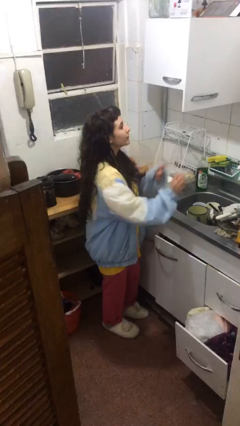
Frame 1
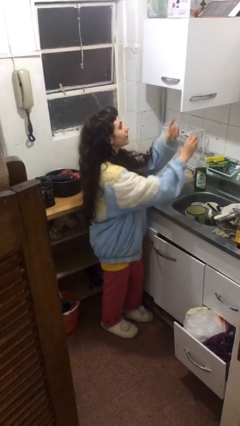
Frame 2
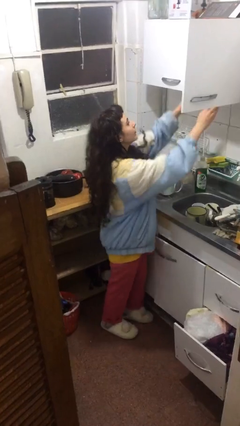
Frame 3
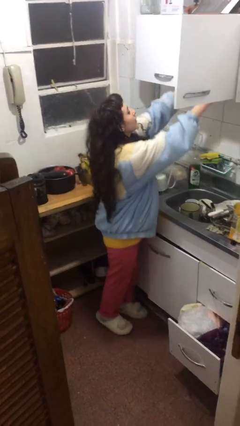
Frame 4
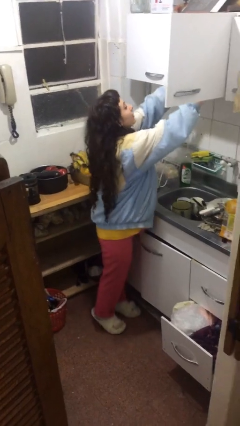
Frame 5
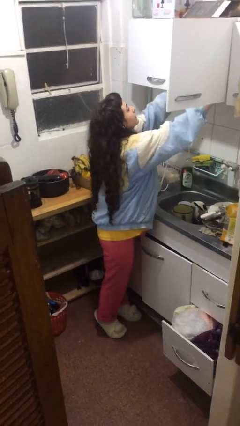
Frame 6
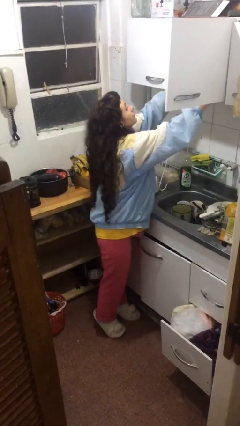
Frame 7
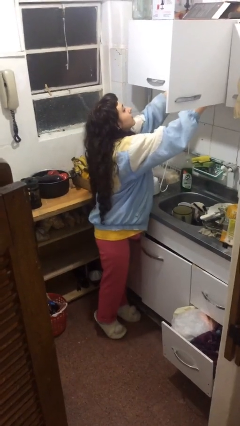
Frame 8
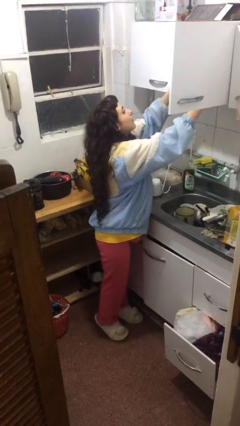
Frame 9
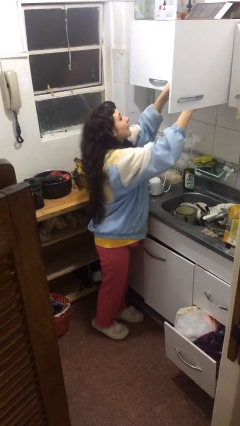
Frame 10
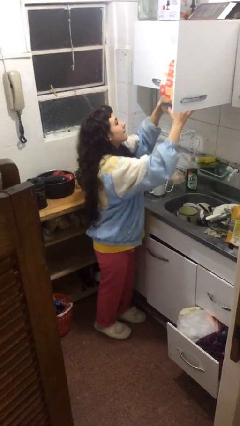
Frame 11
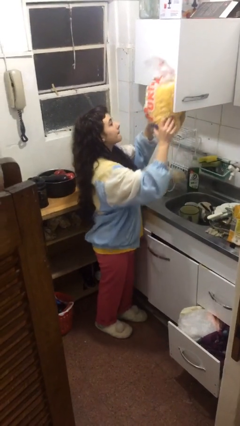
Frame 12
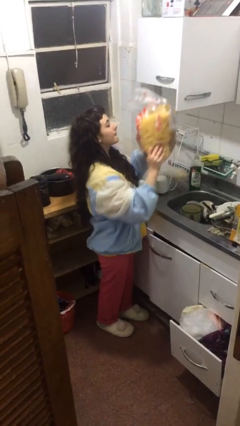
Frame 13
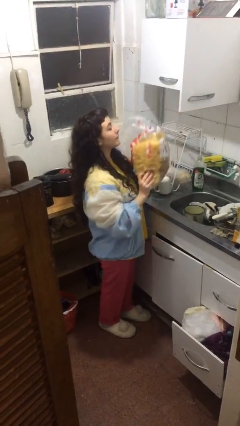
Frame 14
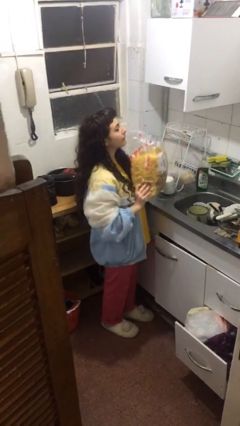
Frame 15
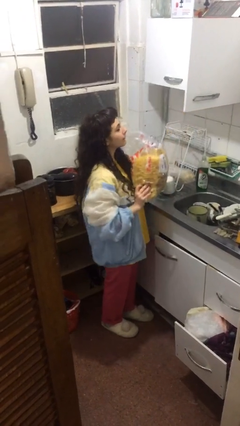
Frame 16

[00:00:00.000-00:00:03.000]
person picks up object from cabinet

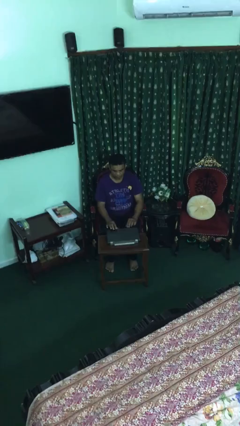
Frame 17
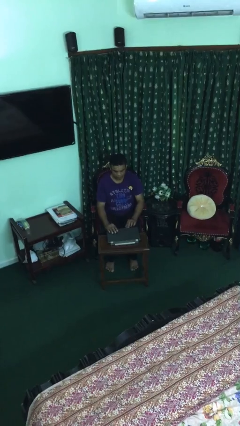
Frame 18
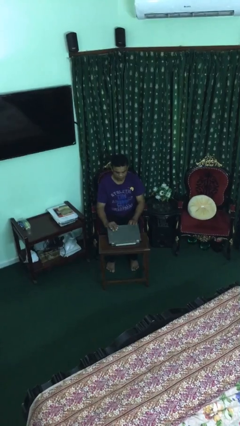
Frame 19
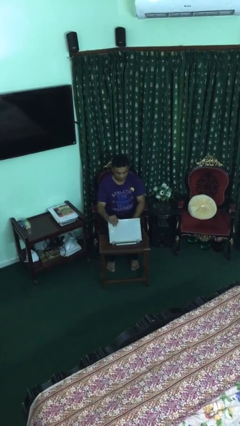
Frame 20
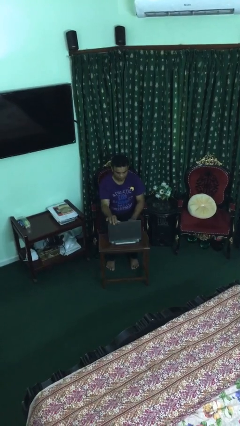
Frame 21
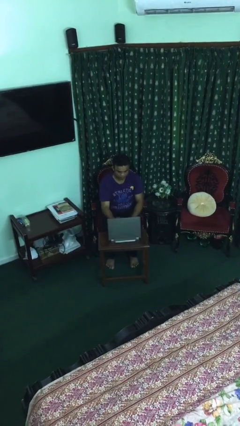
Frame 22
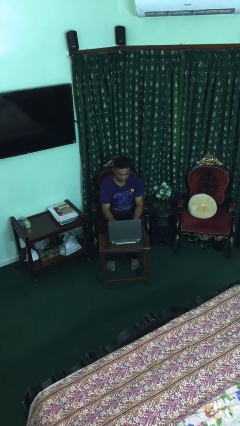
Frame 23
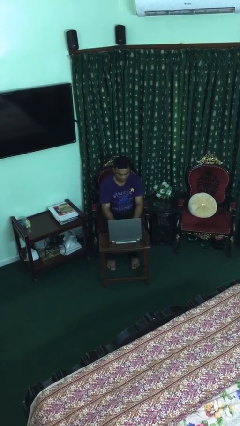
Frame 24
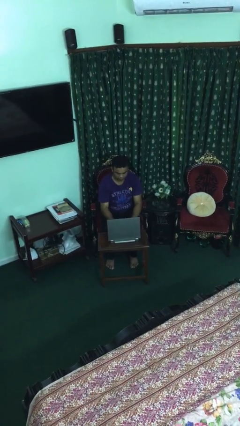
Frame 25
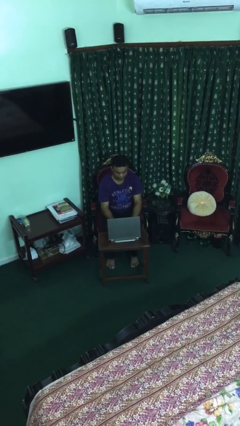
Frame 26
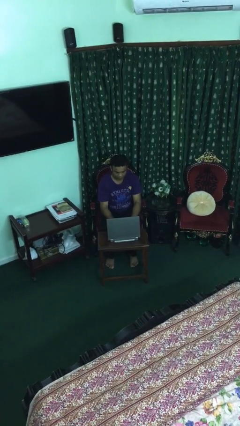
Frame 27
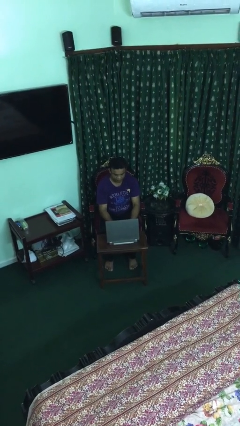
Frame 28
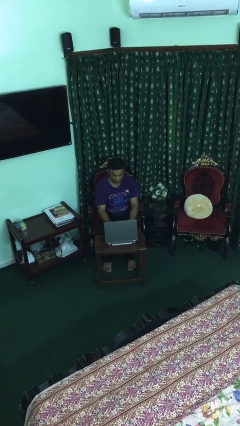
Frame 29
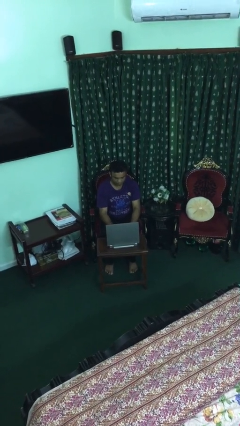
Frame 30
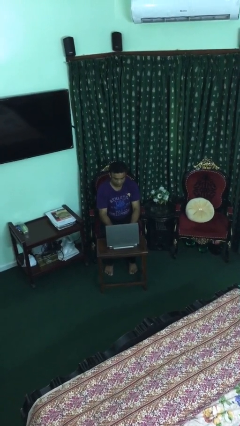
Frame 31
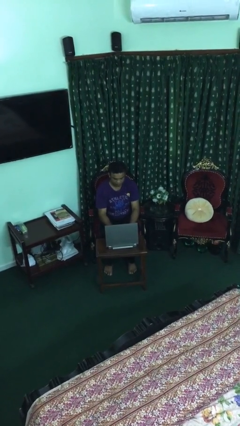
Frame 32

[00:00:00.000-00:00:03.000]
person interacts with laptop

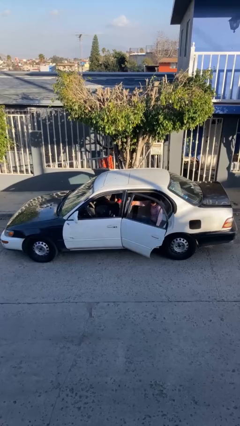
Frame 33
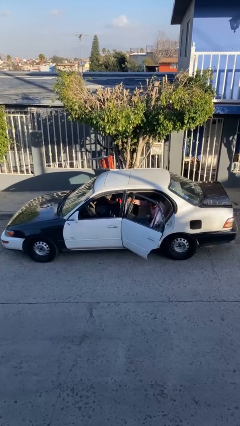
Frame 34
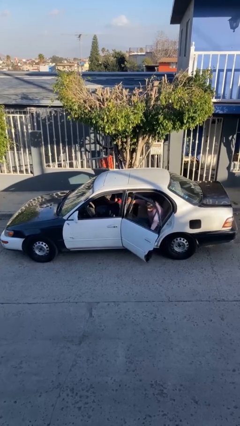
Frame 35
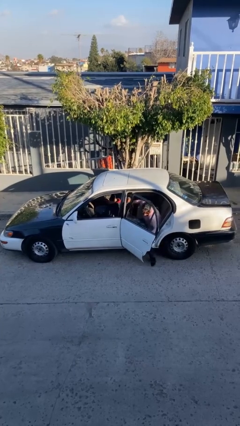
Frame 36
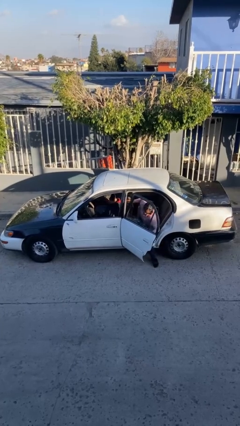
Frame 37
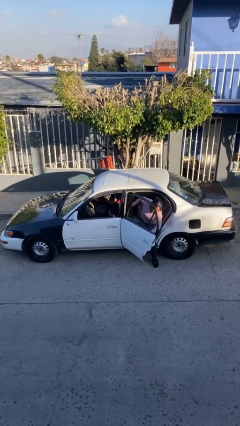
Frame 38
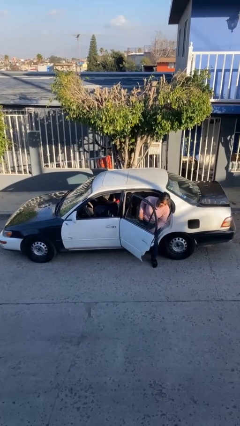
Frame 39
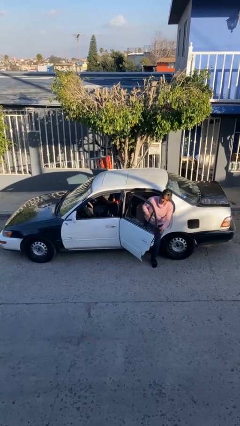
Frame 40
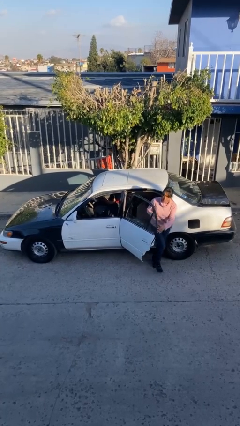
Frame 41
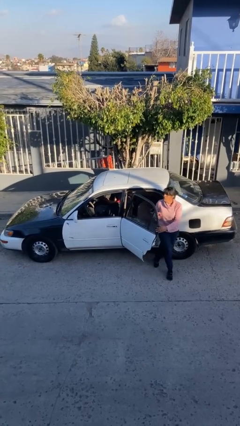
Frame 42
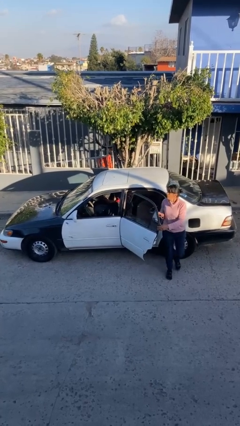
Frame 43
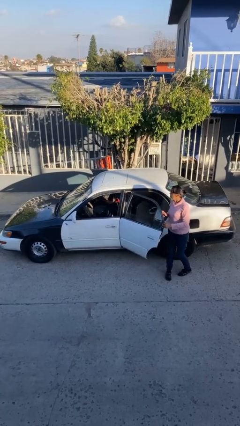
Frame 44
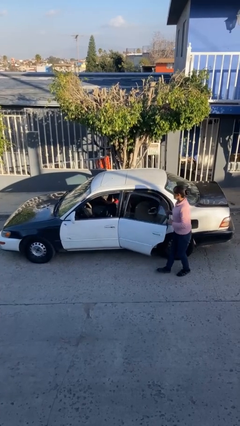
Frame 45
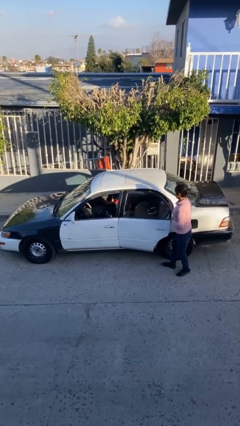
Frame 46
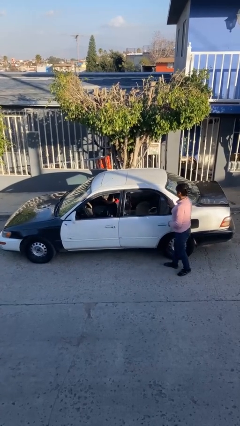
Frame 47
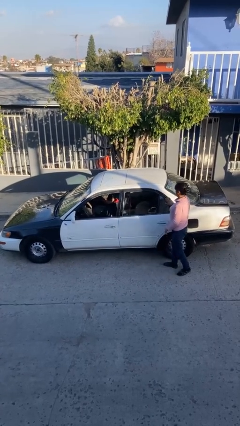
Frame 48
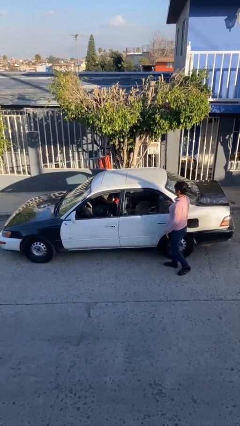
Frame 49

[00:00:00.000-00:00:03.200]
car drops off person

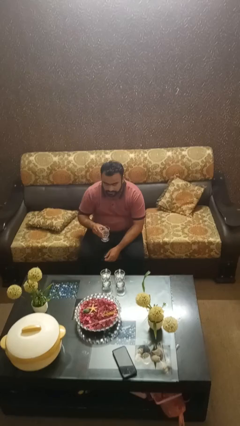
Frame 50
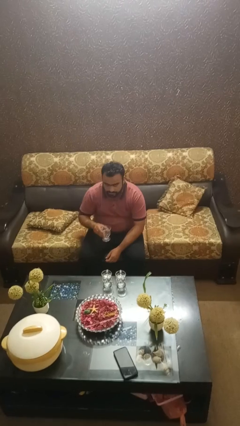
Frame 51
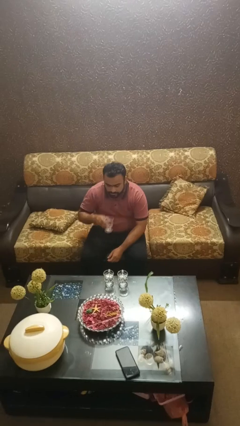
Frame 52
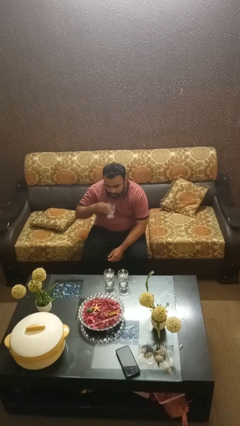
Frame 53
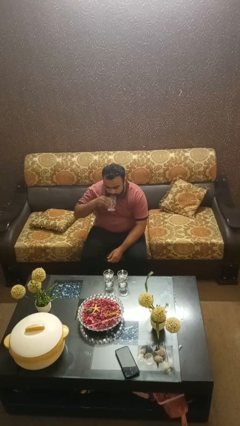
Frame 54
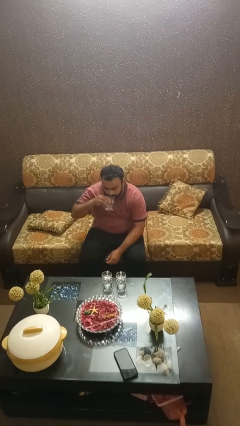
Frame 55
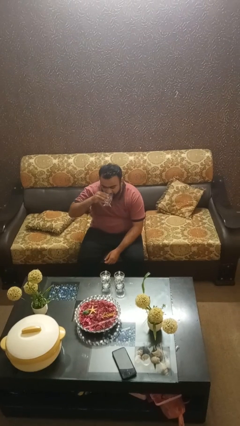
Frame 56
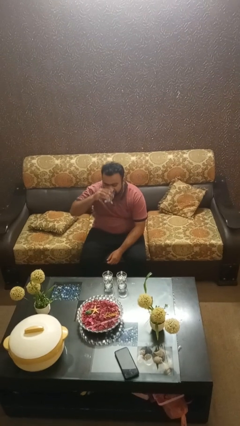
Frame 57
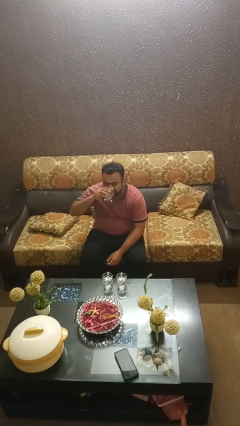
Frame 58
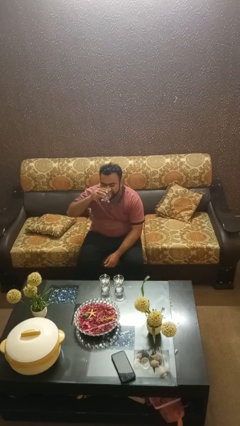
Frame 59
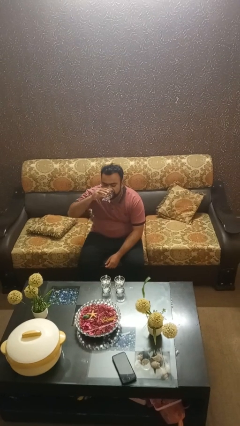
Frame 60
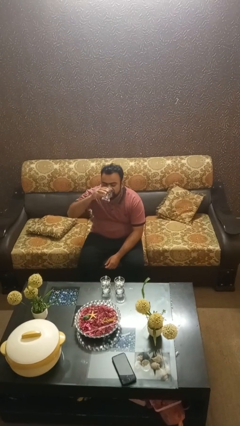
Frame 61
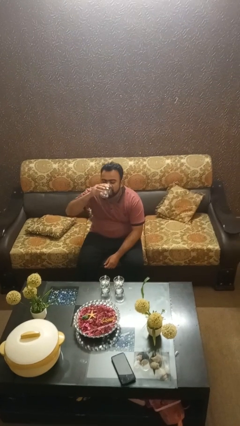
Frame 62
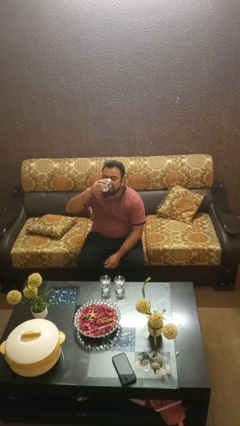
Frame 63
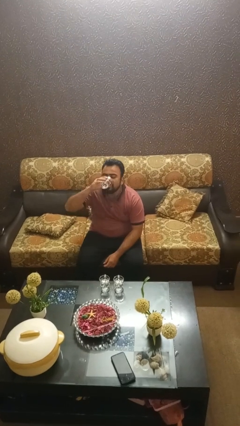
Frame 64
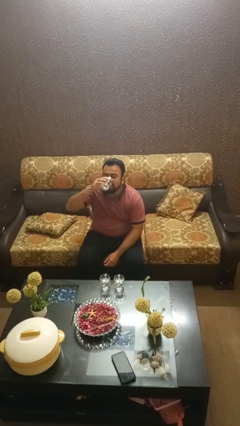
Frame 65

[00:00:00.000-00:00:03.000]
person drinks from shotglass

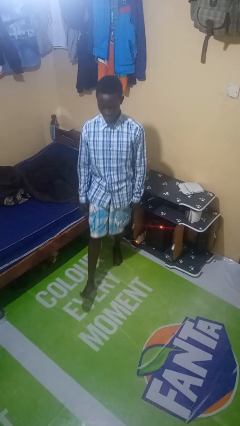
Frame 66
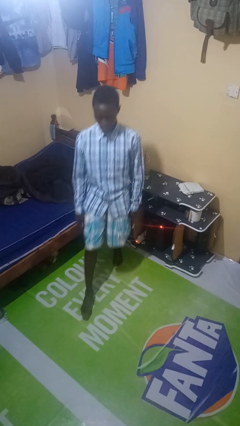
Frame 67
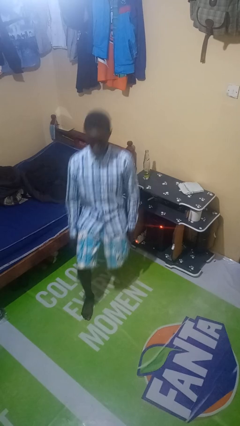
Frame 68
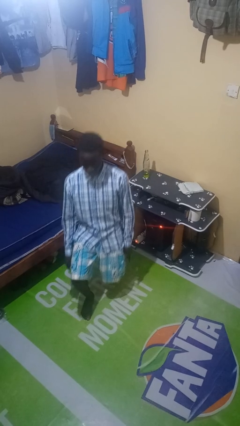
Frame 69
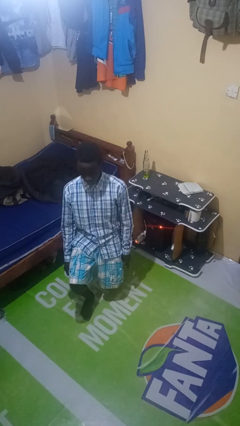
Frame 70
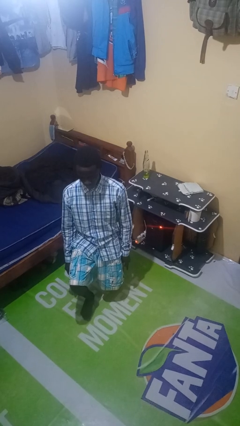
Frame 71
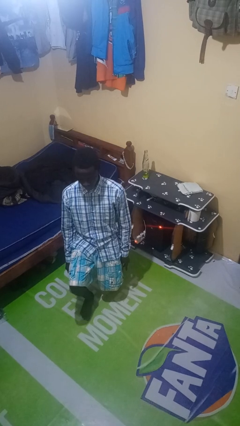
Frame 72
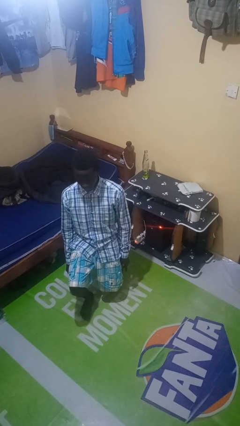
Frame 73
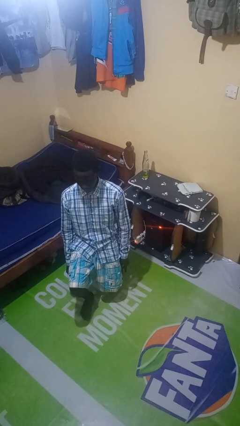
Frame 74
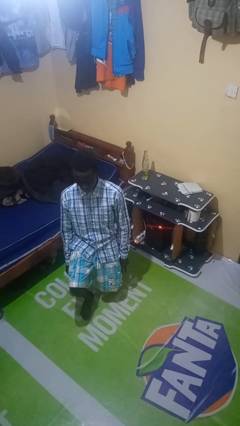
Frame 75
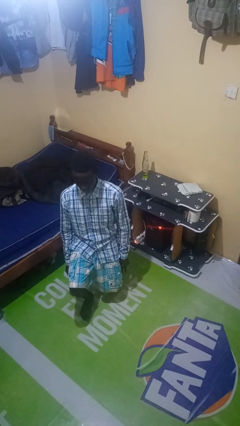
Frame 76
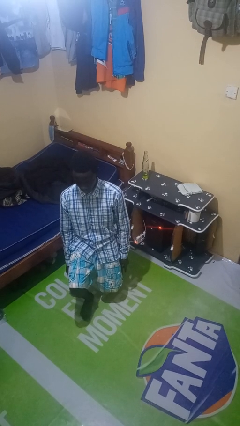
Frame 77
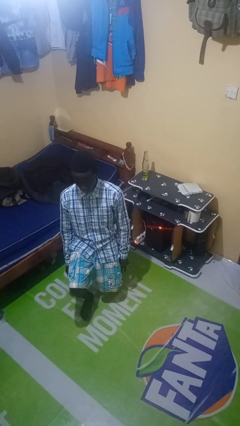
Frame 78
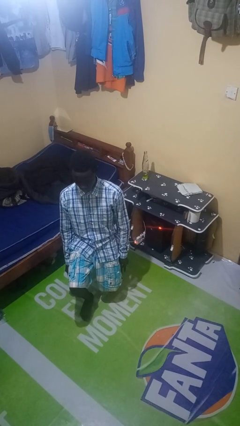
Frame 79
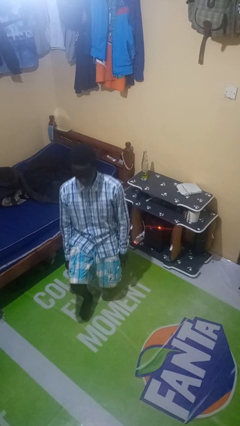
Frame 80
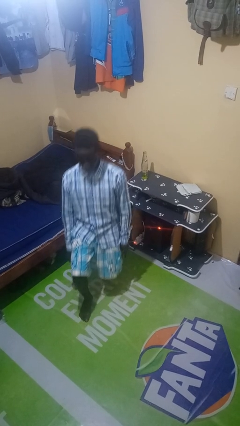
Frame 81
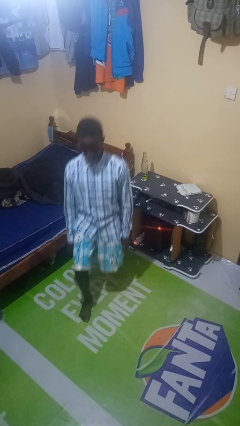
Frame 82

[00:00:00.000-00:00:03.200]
person exercises with lunges

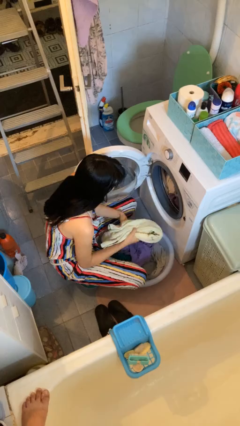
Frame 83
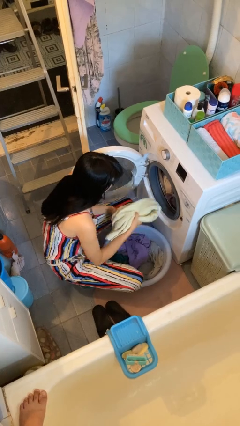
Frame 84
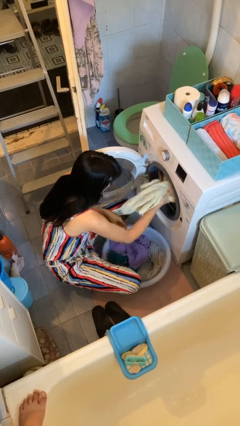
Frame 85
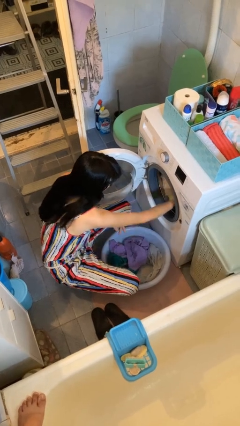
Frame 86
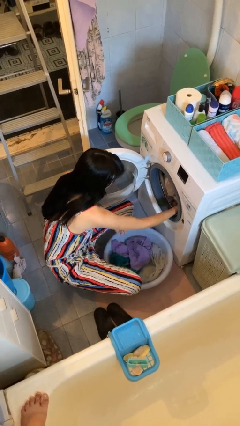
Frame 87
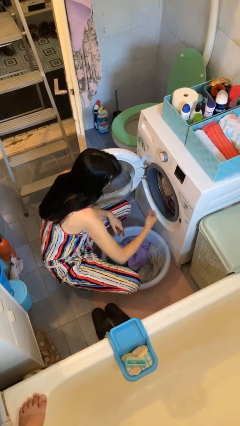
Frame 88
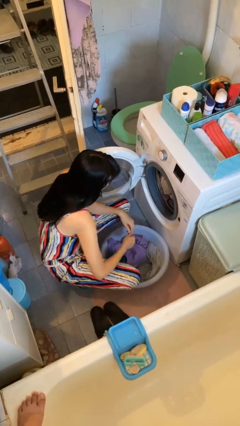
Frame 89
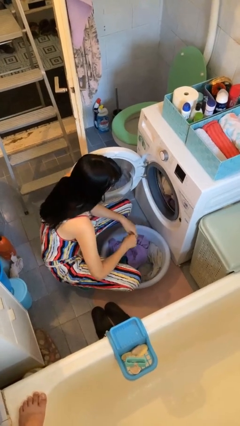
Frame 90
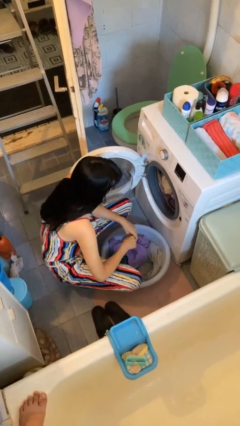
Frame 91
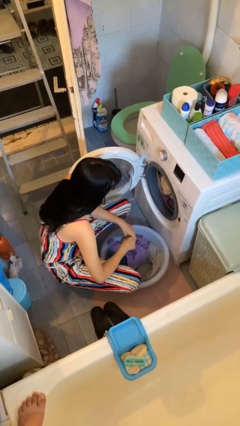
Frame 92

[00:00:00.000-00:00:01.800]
person unloads clotheswasher
